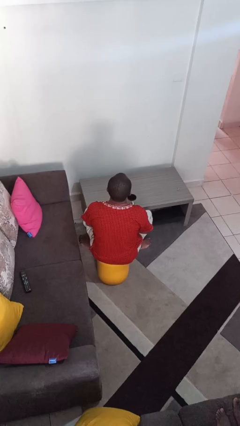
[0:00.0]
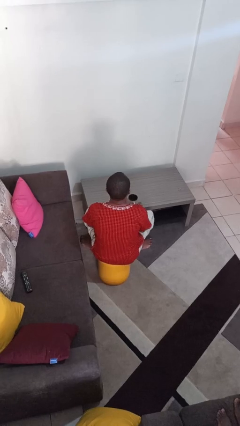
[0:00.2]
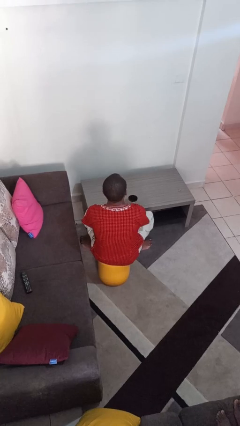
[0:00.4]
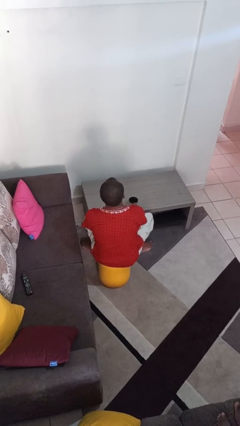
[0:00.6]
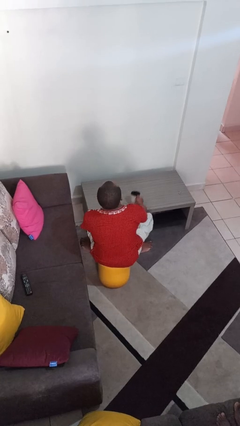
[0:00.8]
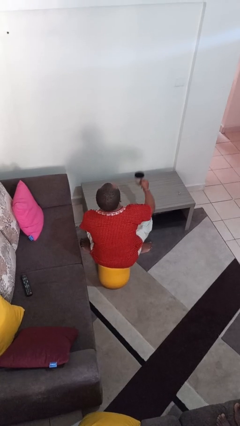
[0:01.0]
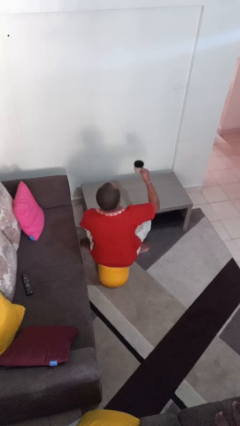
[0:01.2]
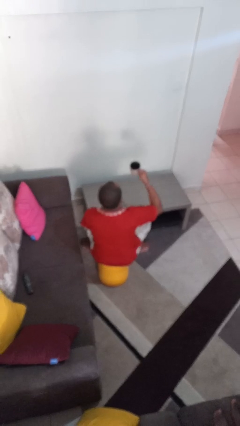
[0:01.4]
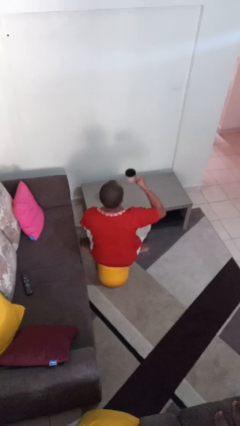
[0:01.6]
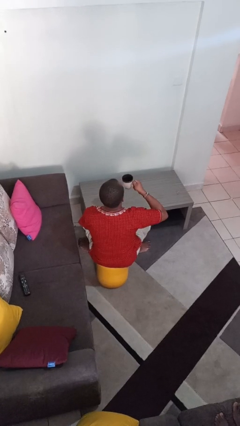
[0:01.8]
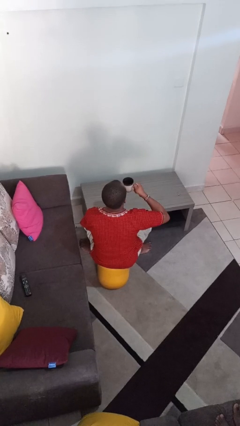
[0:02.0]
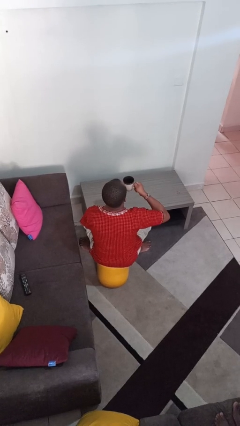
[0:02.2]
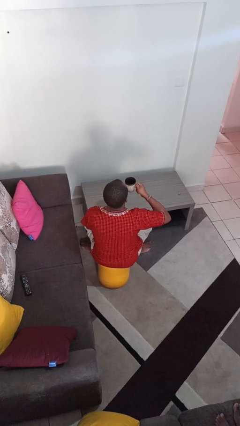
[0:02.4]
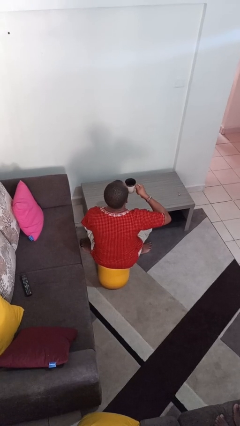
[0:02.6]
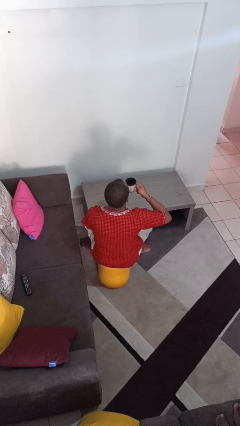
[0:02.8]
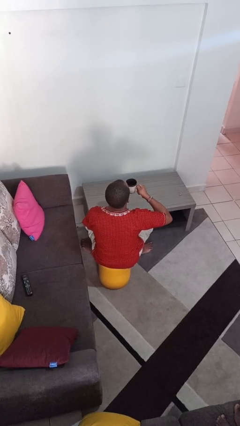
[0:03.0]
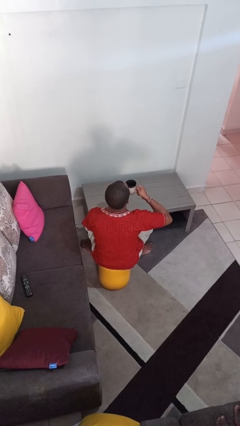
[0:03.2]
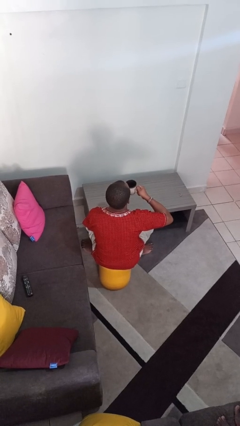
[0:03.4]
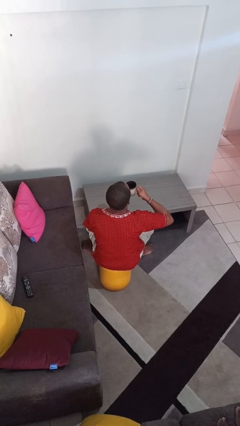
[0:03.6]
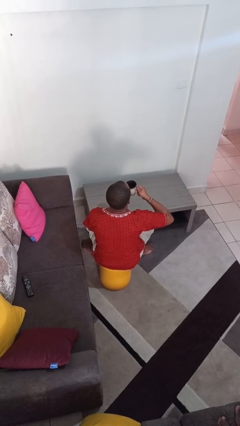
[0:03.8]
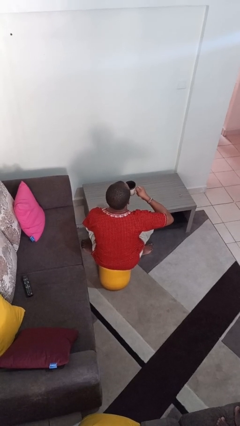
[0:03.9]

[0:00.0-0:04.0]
person picks up object from table

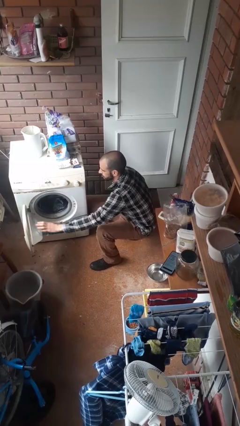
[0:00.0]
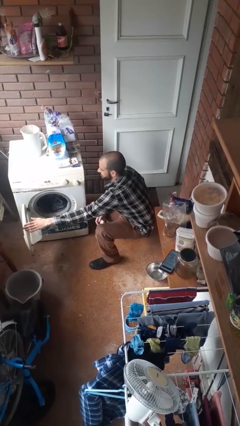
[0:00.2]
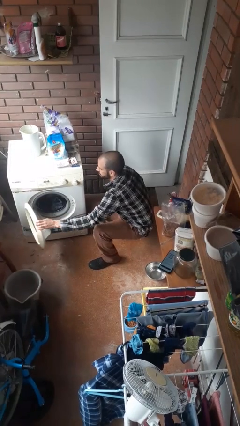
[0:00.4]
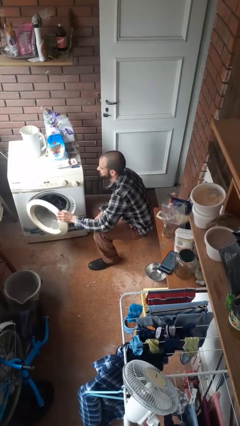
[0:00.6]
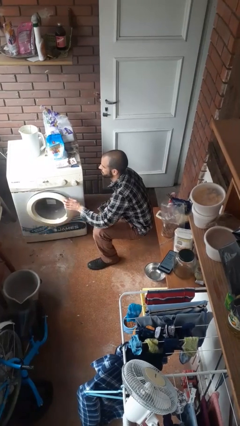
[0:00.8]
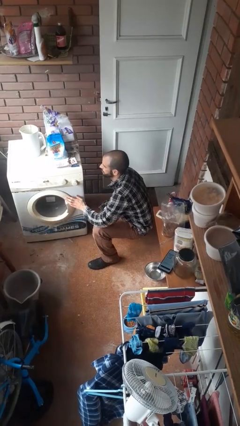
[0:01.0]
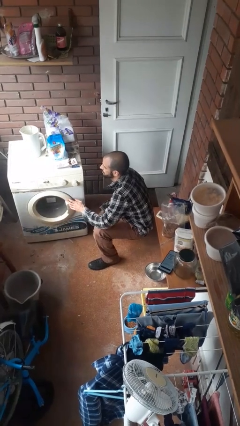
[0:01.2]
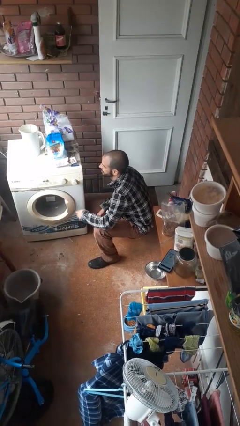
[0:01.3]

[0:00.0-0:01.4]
person closes clothes washer

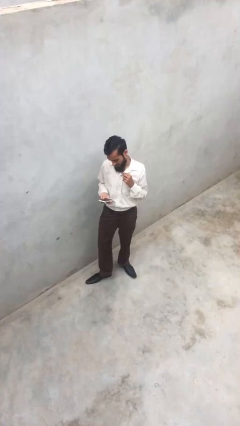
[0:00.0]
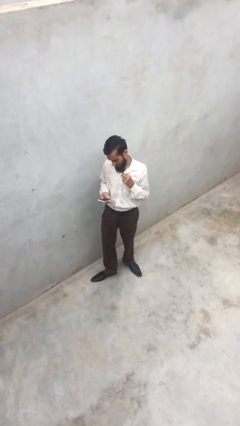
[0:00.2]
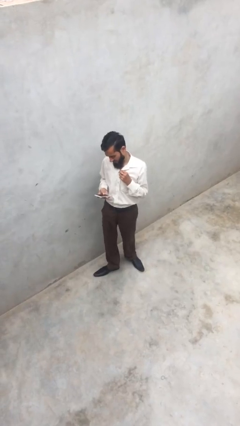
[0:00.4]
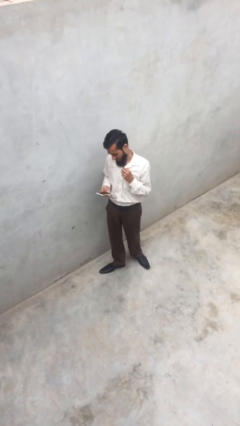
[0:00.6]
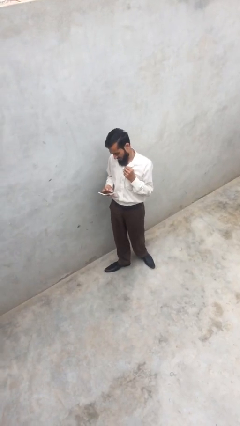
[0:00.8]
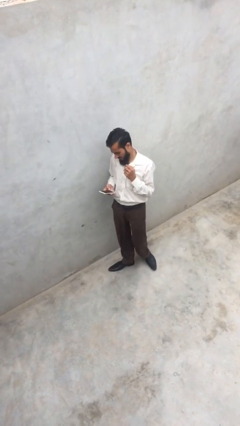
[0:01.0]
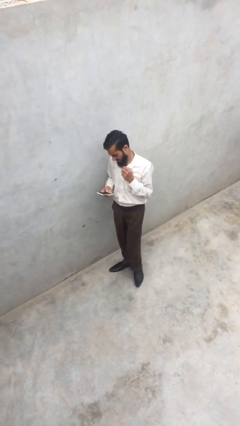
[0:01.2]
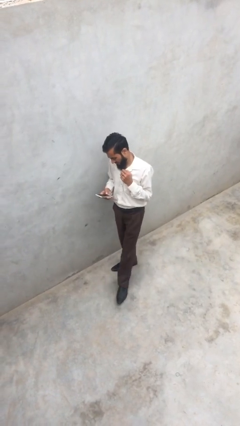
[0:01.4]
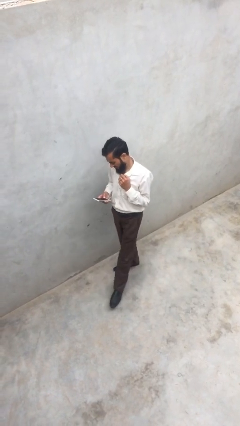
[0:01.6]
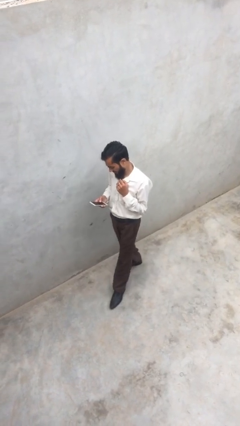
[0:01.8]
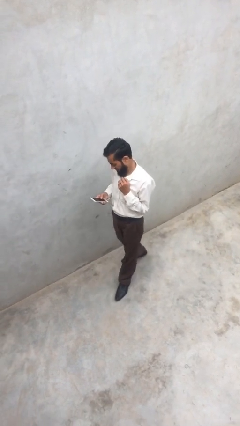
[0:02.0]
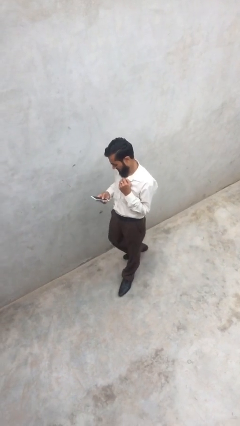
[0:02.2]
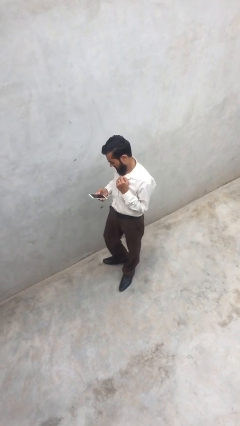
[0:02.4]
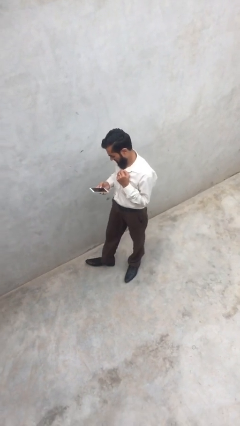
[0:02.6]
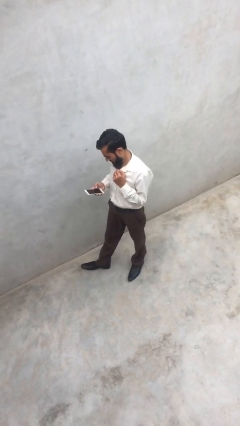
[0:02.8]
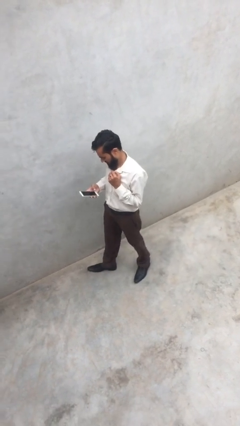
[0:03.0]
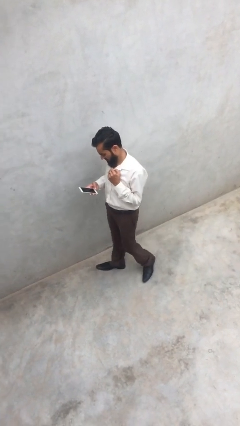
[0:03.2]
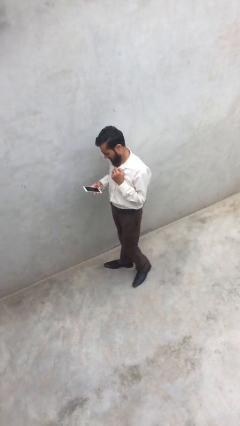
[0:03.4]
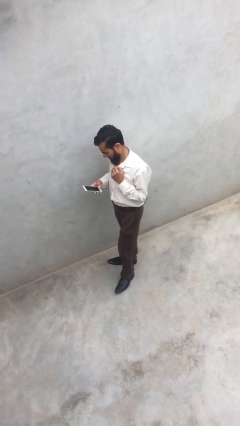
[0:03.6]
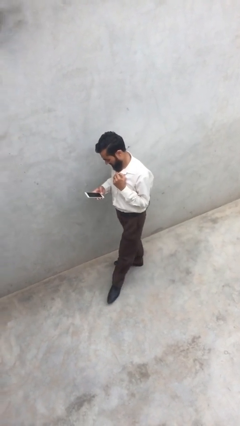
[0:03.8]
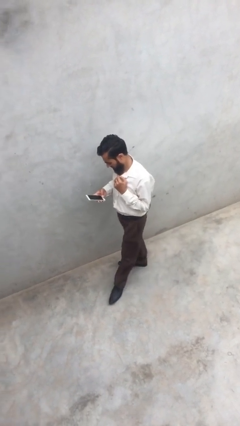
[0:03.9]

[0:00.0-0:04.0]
person texts on phone

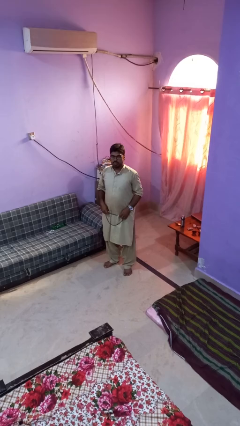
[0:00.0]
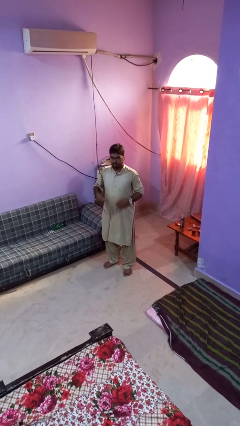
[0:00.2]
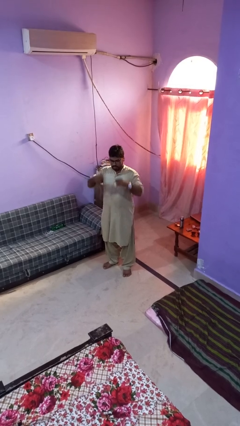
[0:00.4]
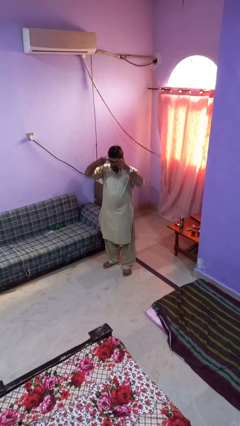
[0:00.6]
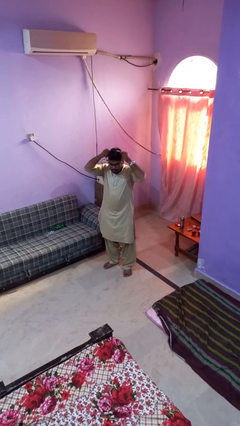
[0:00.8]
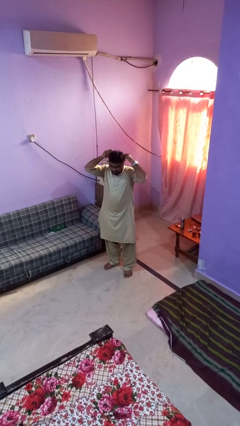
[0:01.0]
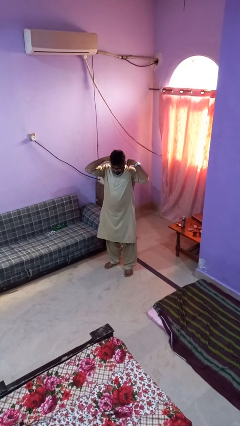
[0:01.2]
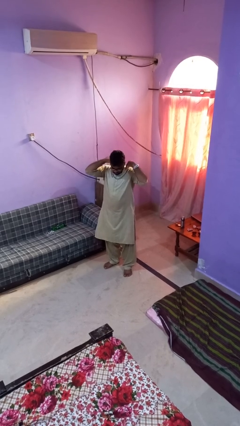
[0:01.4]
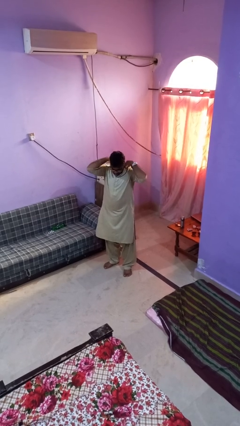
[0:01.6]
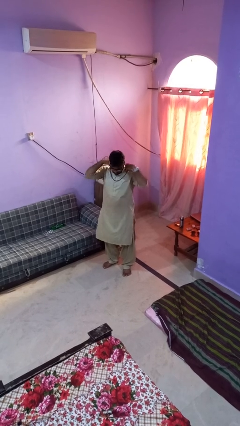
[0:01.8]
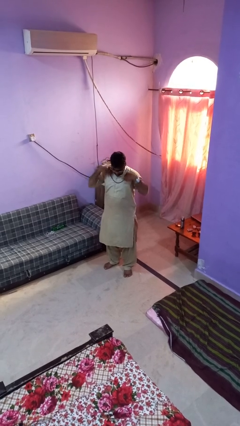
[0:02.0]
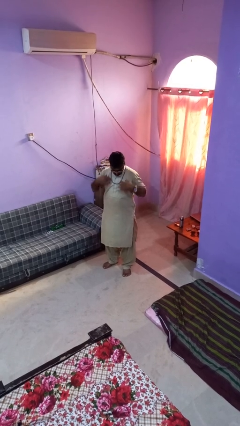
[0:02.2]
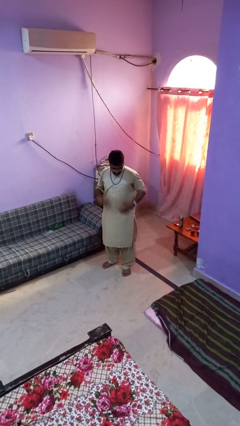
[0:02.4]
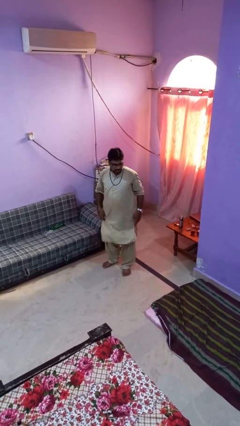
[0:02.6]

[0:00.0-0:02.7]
person puts on necklace

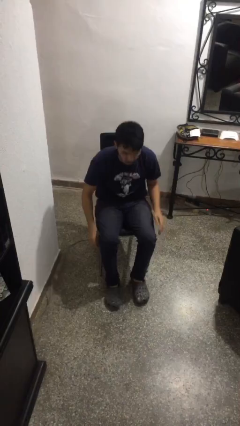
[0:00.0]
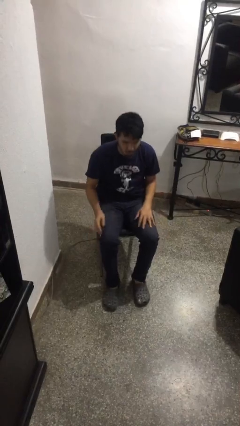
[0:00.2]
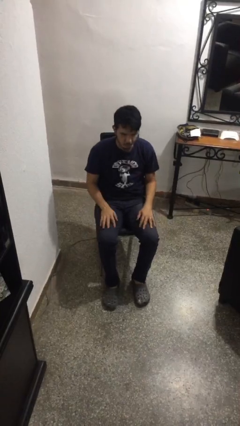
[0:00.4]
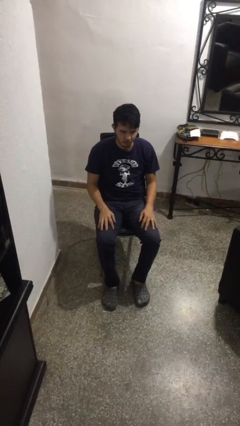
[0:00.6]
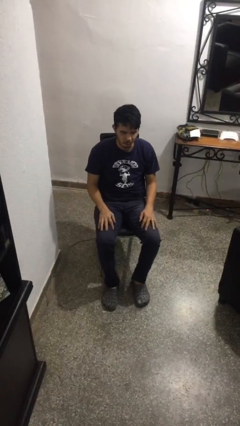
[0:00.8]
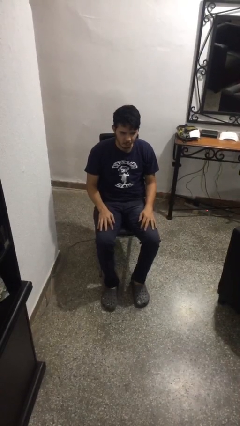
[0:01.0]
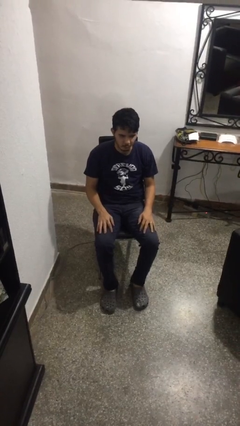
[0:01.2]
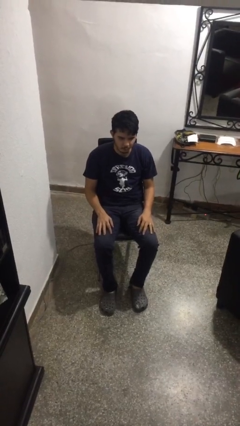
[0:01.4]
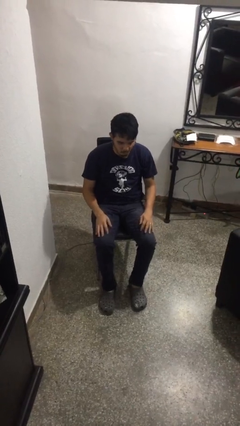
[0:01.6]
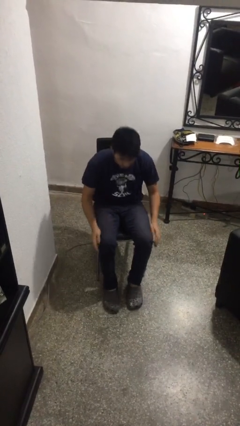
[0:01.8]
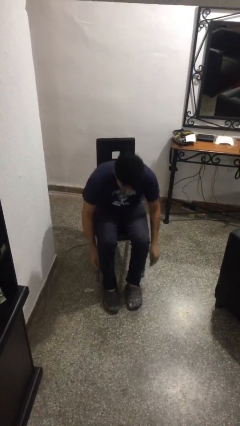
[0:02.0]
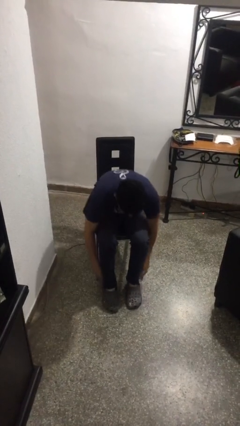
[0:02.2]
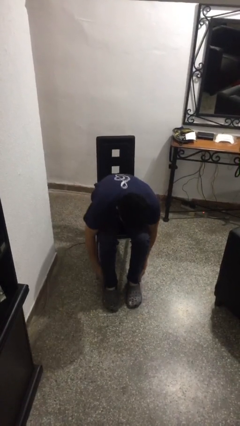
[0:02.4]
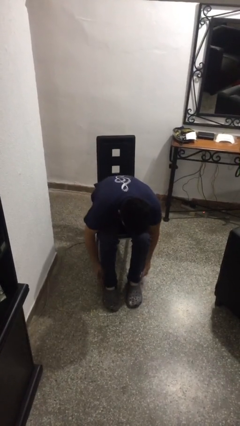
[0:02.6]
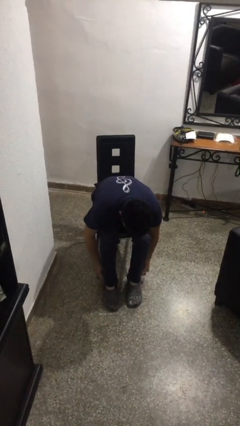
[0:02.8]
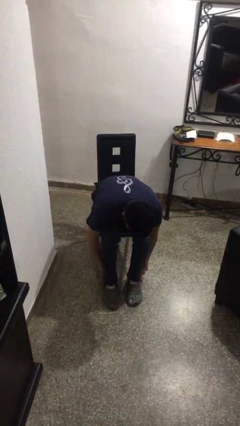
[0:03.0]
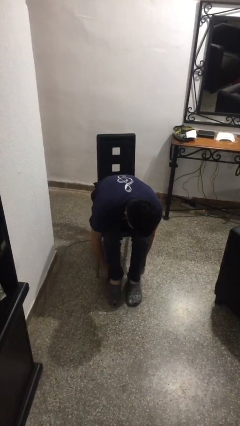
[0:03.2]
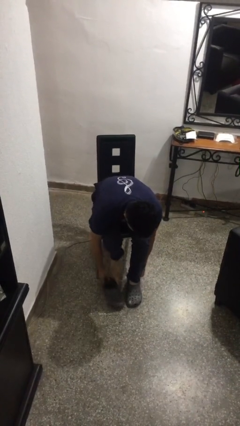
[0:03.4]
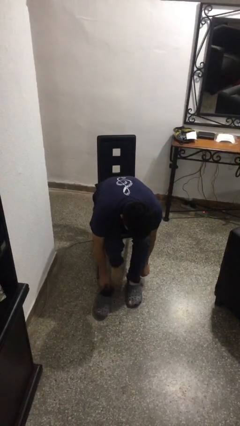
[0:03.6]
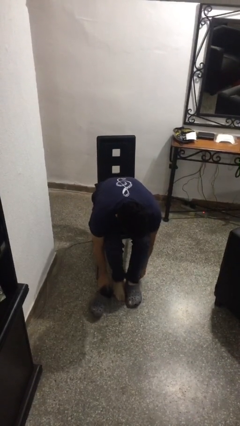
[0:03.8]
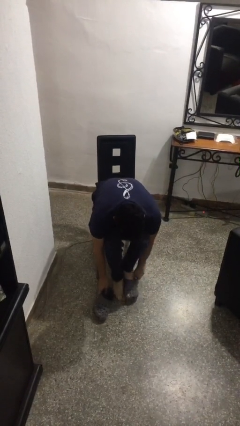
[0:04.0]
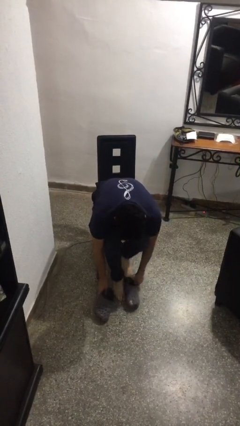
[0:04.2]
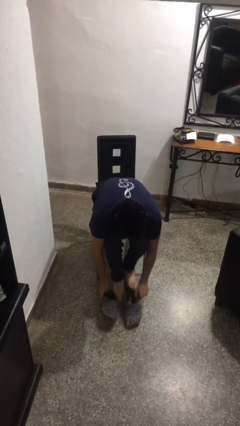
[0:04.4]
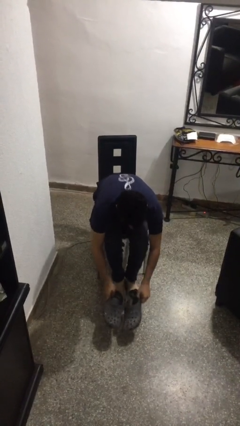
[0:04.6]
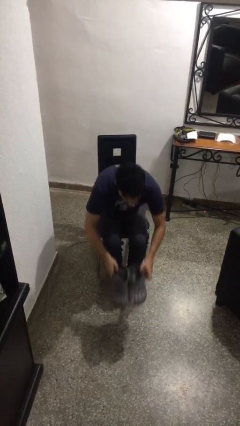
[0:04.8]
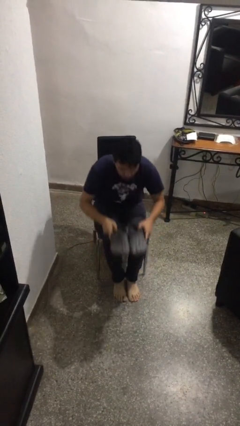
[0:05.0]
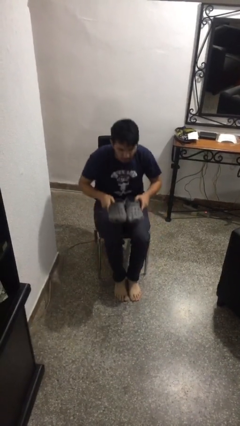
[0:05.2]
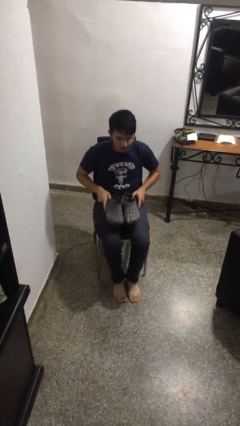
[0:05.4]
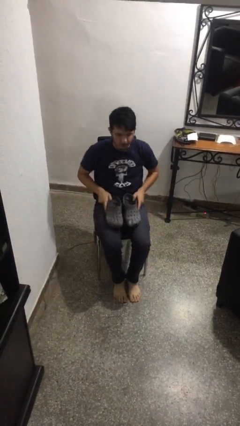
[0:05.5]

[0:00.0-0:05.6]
person takes off shoes
